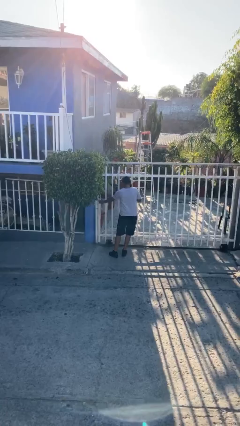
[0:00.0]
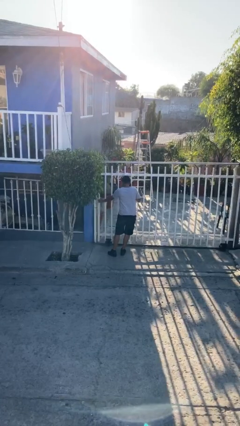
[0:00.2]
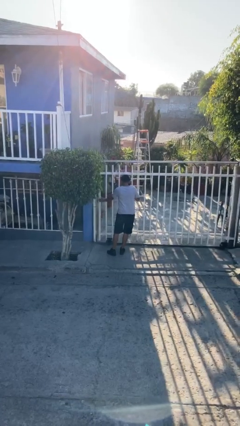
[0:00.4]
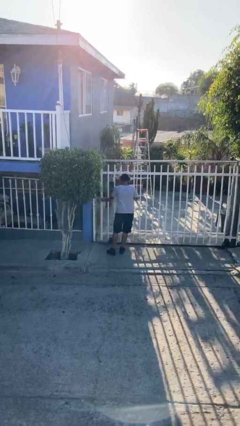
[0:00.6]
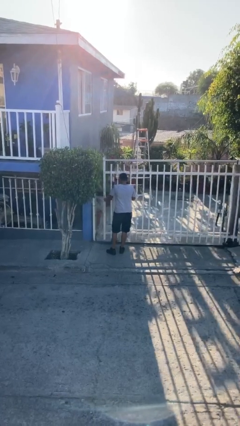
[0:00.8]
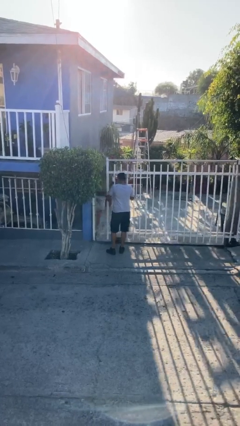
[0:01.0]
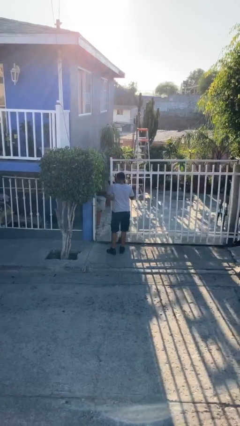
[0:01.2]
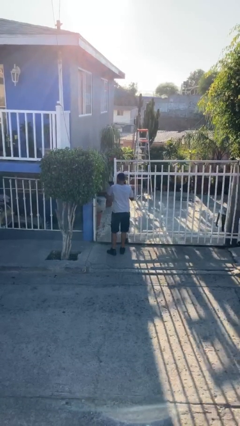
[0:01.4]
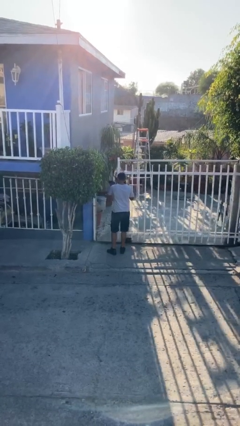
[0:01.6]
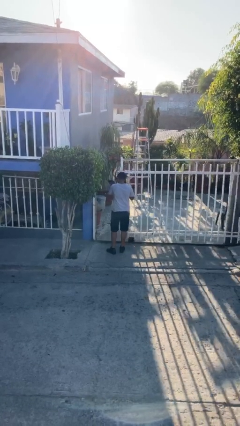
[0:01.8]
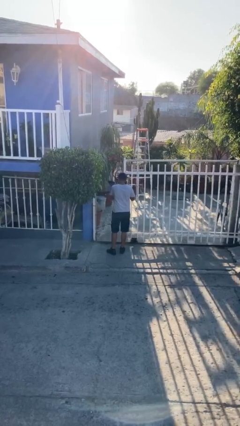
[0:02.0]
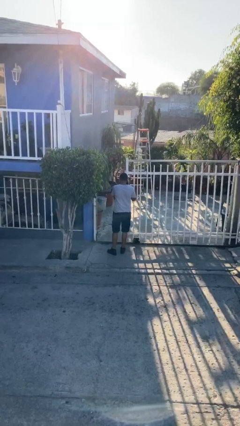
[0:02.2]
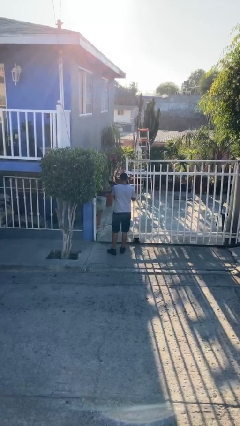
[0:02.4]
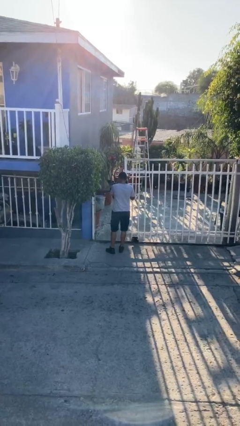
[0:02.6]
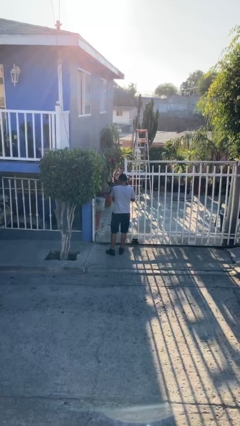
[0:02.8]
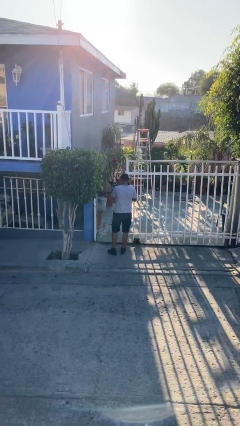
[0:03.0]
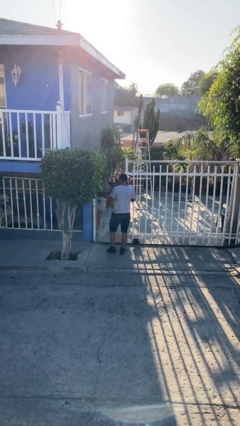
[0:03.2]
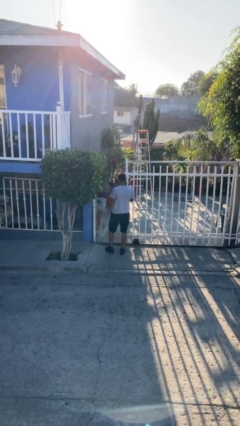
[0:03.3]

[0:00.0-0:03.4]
person opens facility door

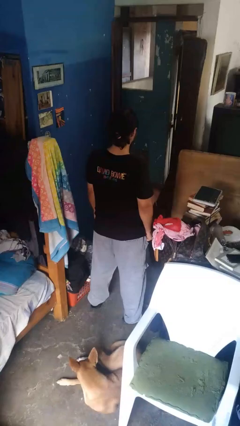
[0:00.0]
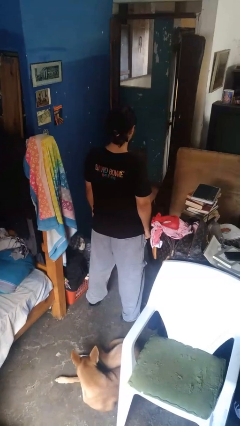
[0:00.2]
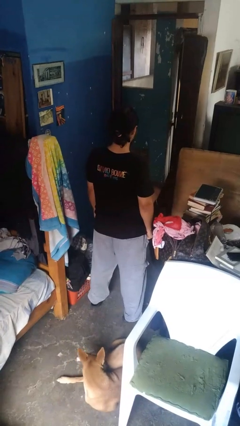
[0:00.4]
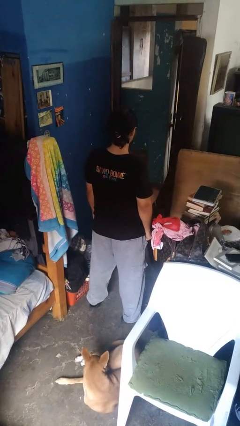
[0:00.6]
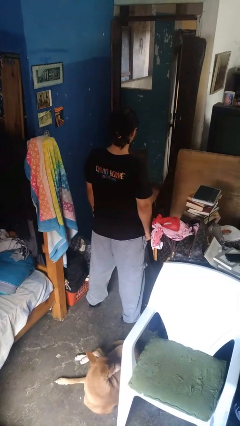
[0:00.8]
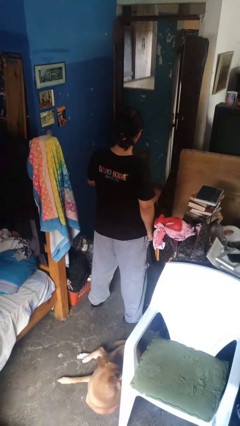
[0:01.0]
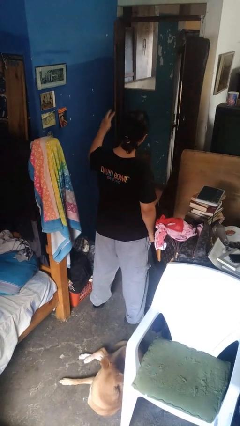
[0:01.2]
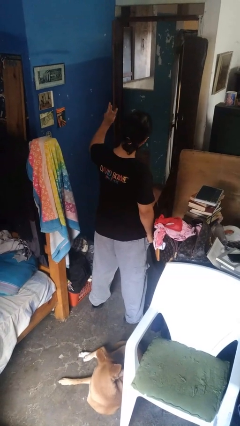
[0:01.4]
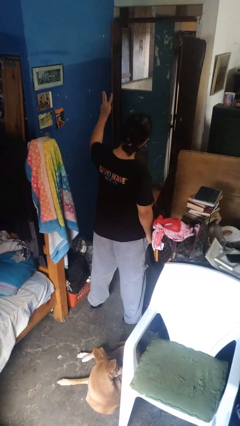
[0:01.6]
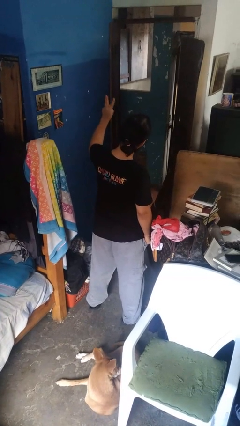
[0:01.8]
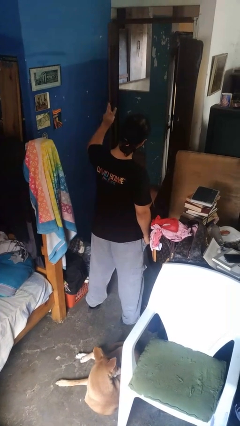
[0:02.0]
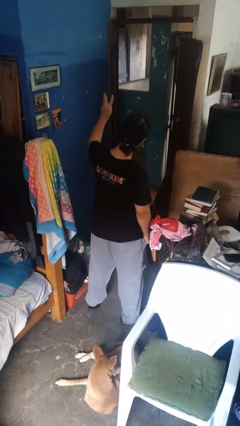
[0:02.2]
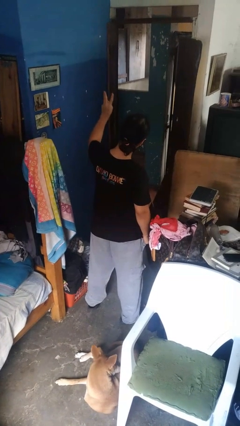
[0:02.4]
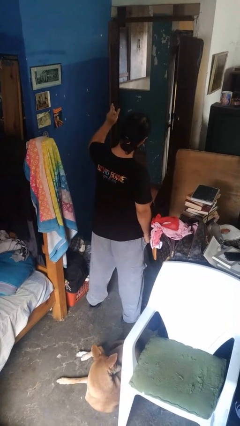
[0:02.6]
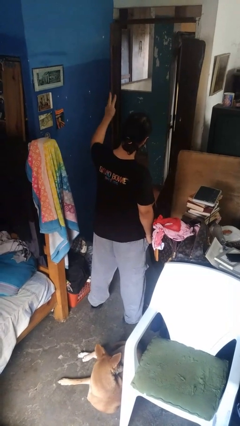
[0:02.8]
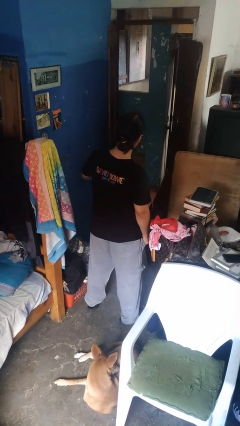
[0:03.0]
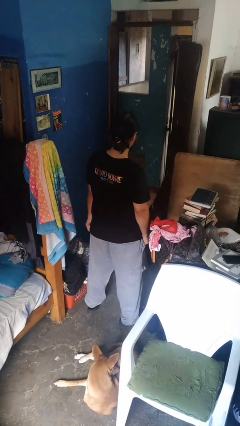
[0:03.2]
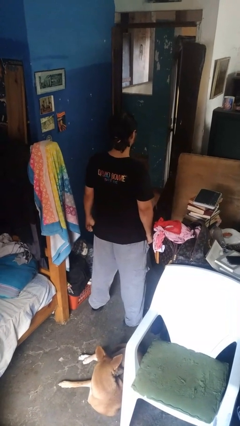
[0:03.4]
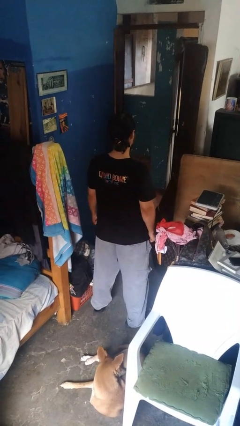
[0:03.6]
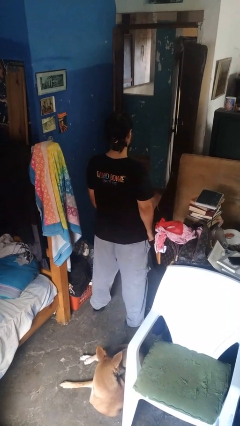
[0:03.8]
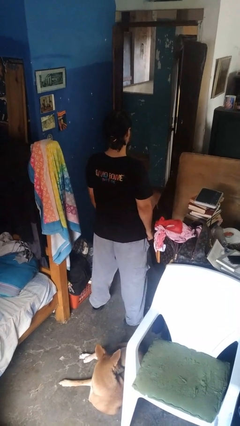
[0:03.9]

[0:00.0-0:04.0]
person gestures number three

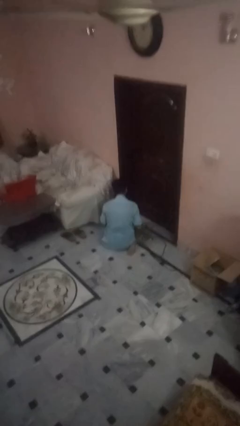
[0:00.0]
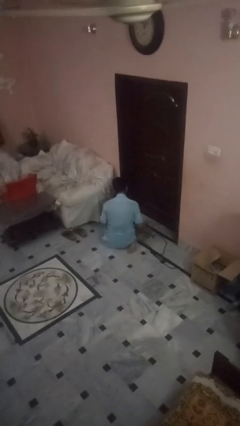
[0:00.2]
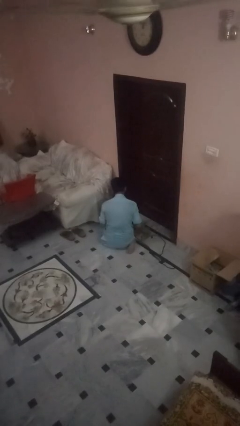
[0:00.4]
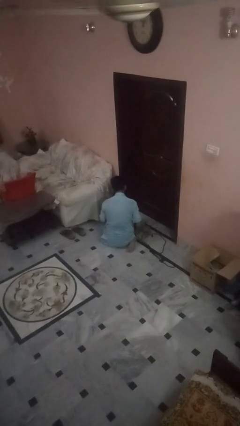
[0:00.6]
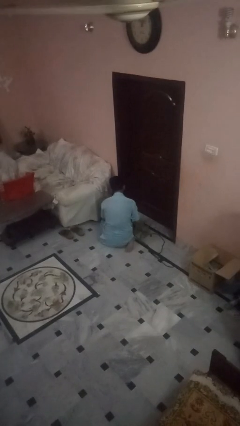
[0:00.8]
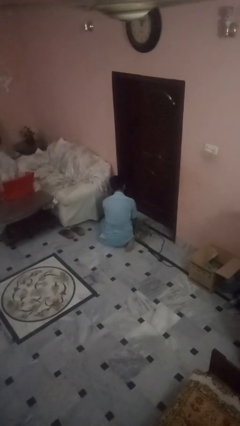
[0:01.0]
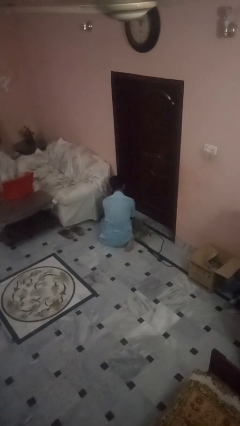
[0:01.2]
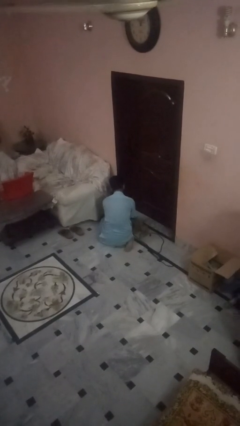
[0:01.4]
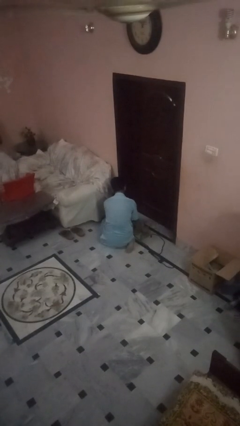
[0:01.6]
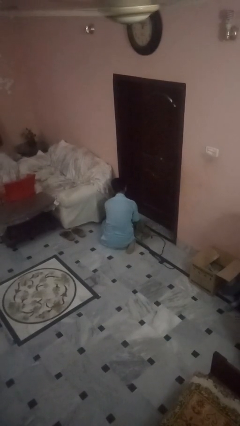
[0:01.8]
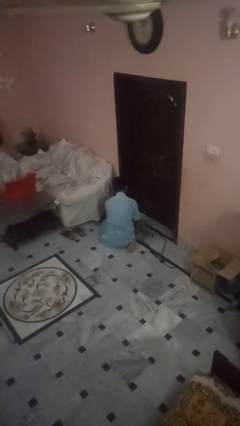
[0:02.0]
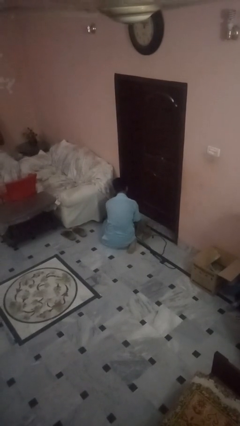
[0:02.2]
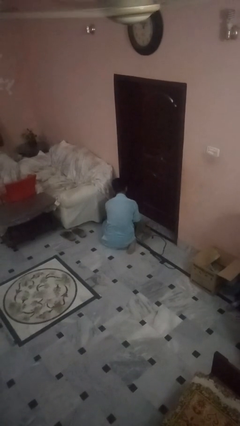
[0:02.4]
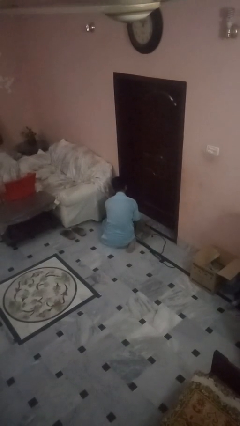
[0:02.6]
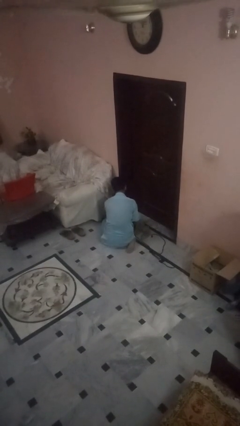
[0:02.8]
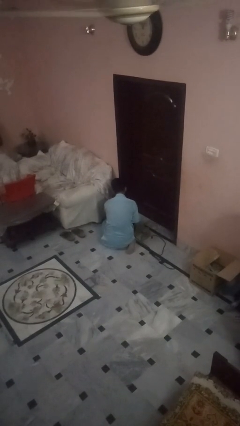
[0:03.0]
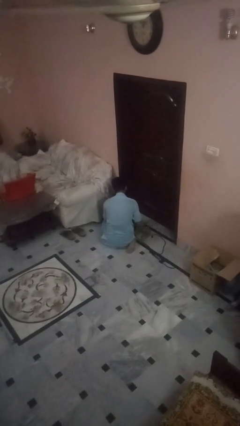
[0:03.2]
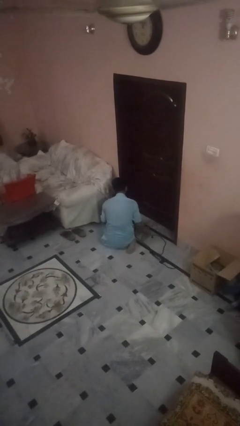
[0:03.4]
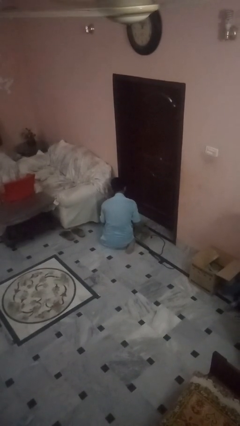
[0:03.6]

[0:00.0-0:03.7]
person attaches leash to dog

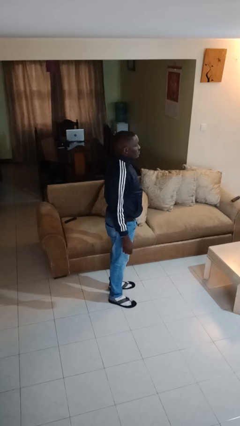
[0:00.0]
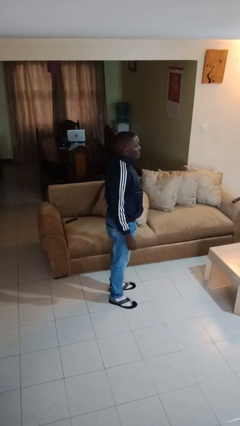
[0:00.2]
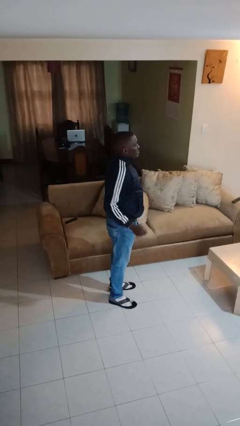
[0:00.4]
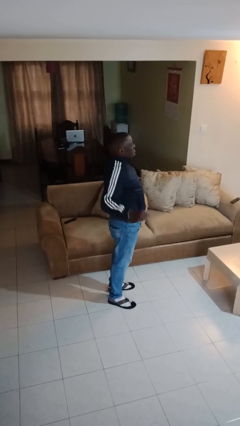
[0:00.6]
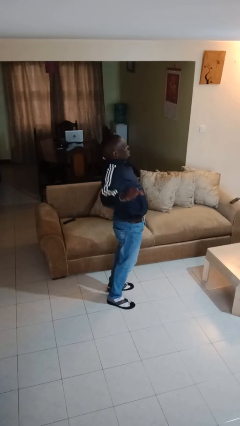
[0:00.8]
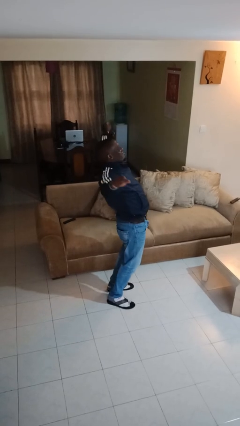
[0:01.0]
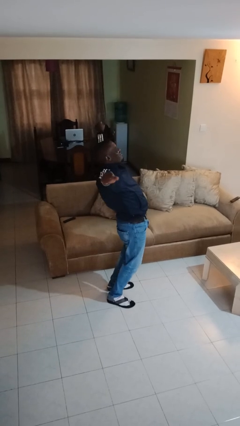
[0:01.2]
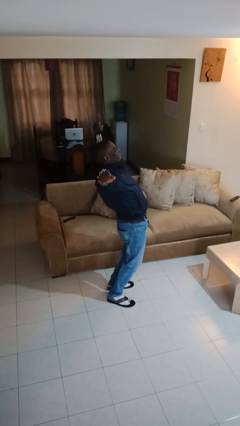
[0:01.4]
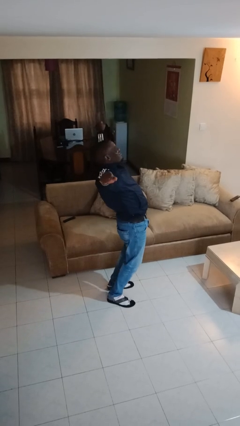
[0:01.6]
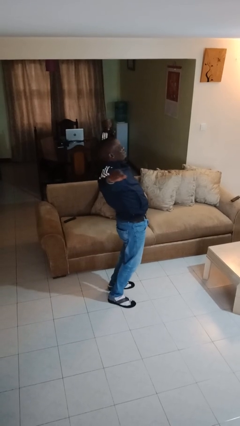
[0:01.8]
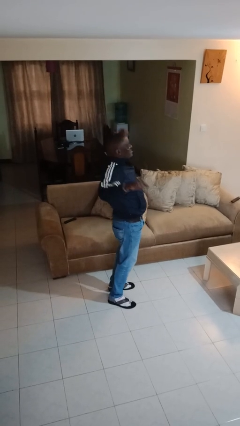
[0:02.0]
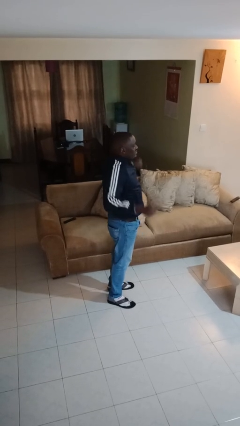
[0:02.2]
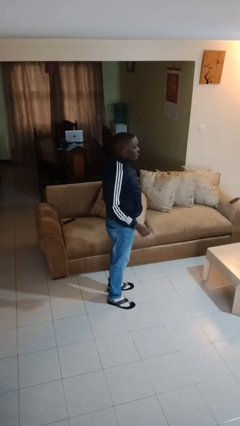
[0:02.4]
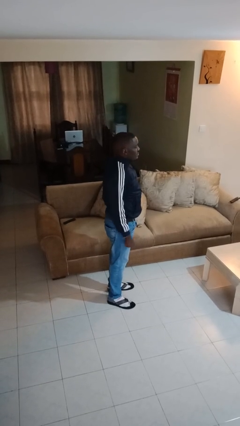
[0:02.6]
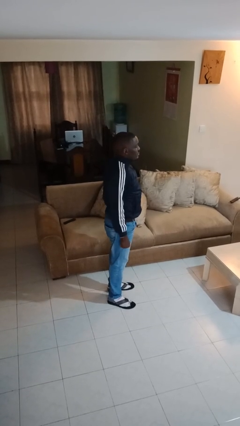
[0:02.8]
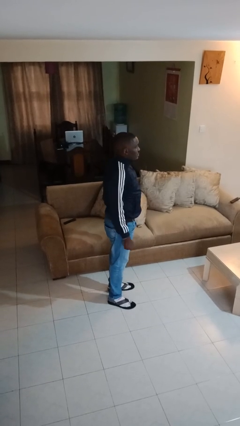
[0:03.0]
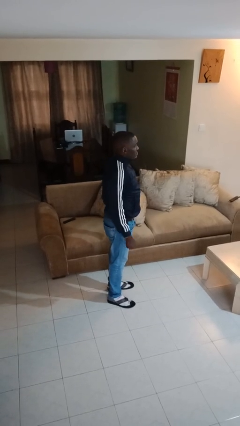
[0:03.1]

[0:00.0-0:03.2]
person stretches arms to side

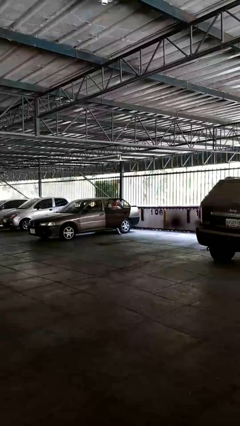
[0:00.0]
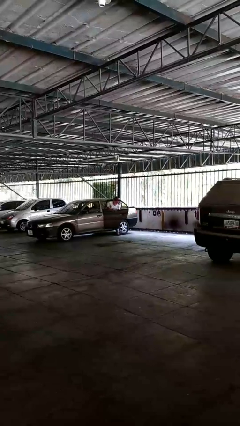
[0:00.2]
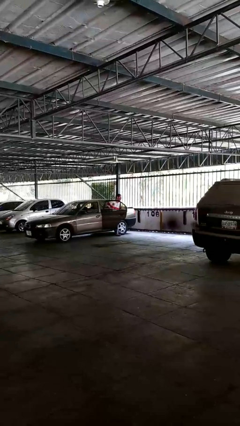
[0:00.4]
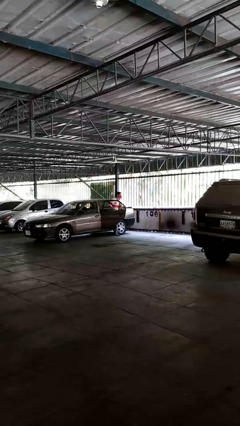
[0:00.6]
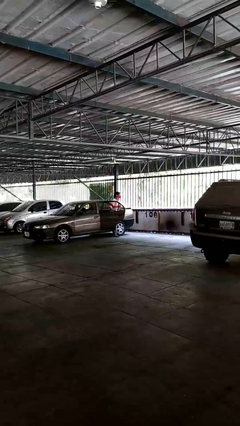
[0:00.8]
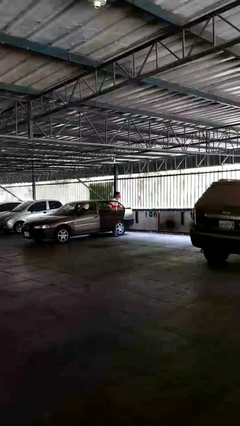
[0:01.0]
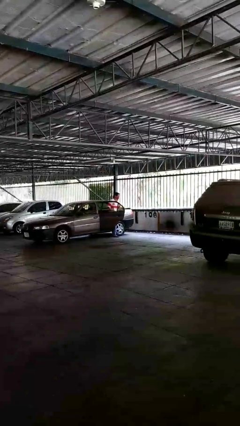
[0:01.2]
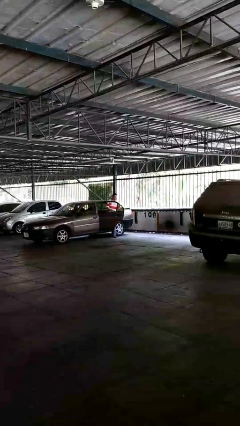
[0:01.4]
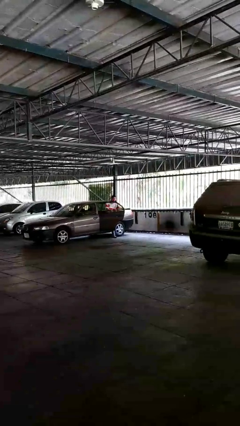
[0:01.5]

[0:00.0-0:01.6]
person exits car

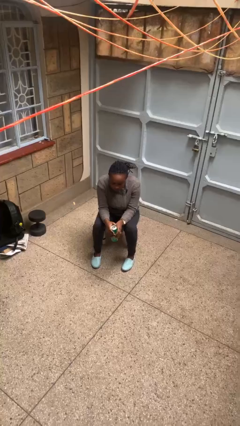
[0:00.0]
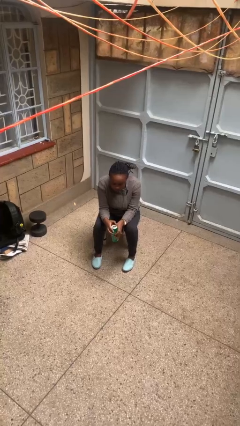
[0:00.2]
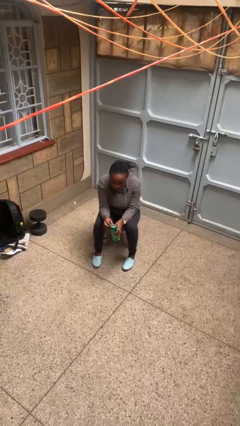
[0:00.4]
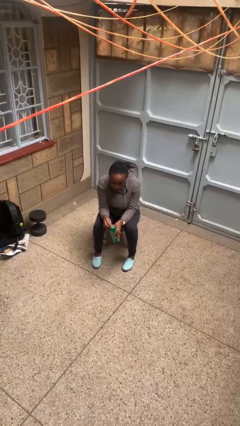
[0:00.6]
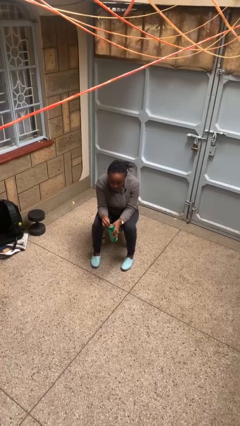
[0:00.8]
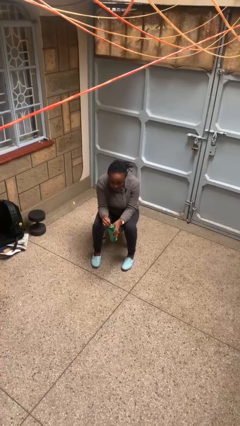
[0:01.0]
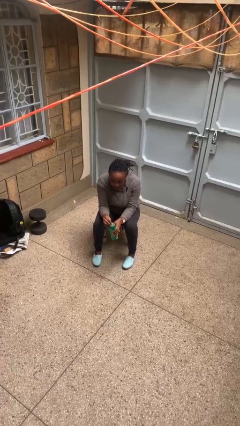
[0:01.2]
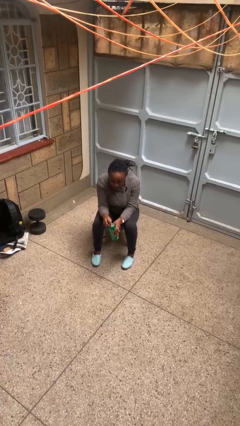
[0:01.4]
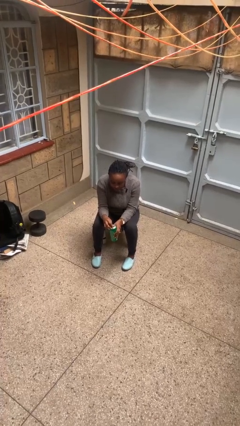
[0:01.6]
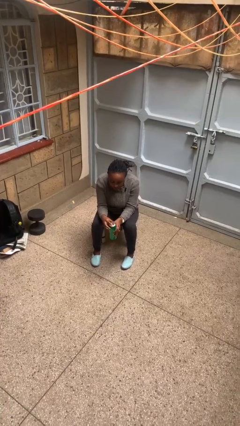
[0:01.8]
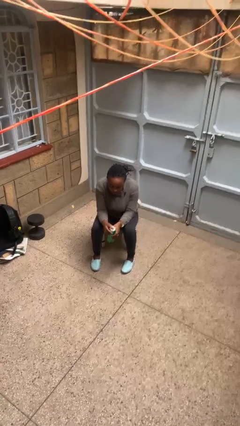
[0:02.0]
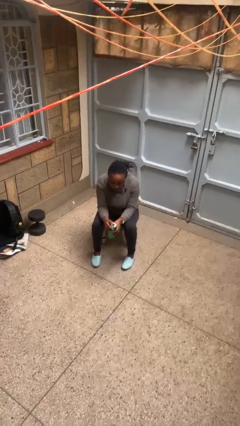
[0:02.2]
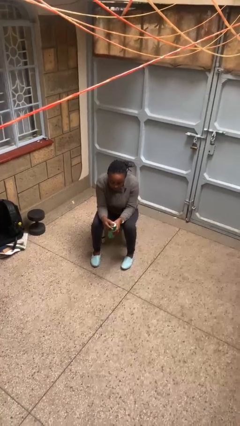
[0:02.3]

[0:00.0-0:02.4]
person opens beverage can
